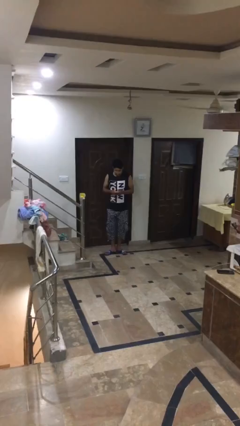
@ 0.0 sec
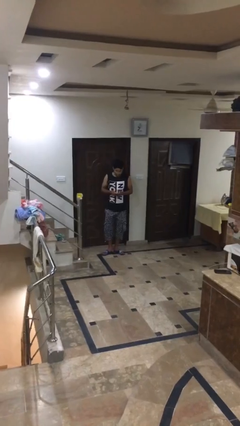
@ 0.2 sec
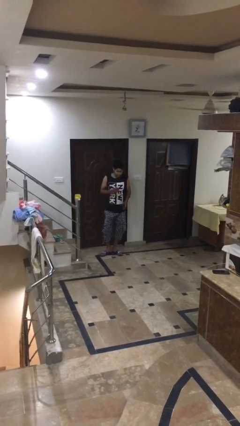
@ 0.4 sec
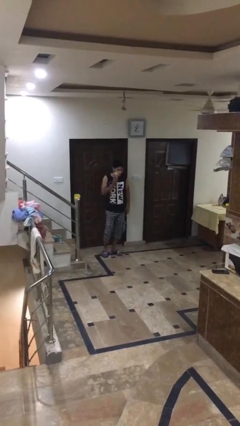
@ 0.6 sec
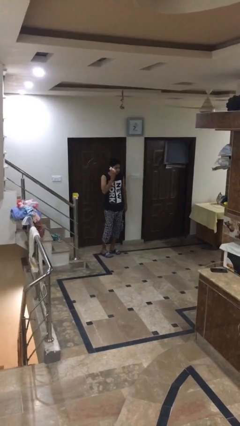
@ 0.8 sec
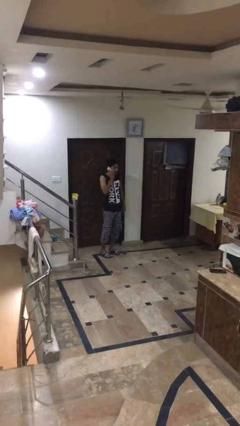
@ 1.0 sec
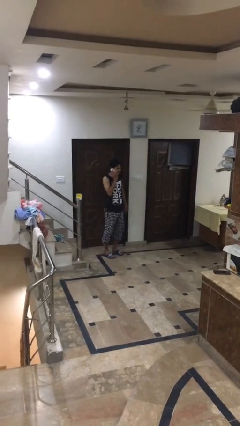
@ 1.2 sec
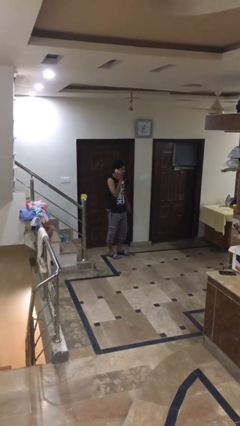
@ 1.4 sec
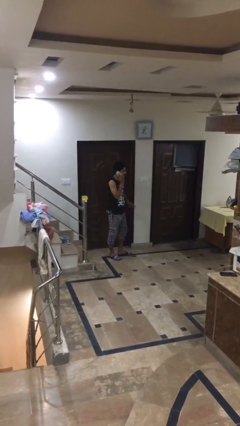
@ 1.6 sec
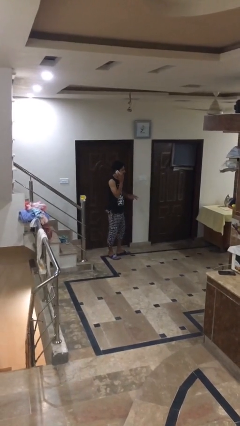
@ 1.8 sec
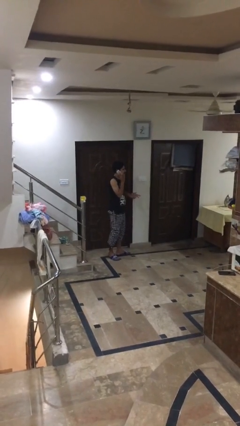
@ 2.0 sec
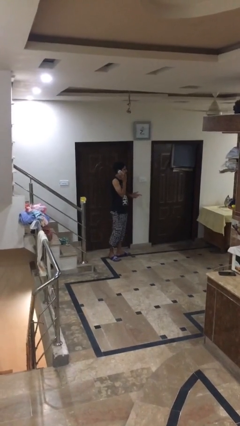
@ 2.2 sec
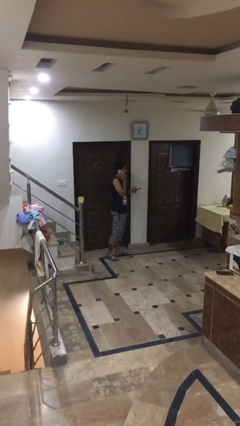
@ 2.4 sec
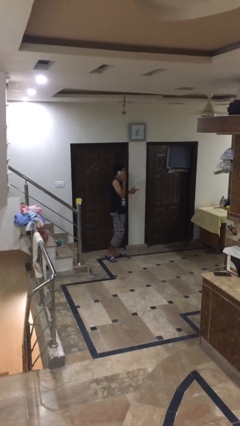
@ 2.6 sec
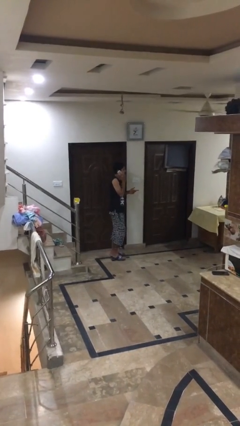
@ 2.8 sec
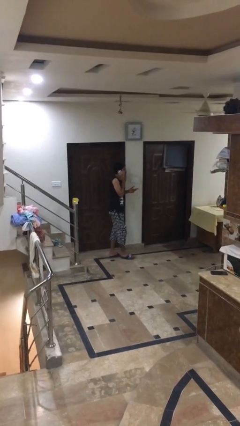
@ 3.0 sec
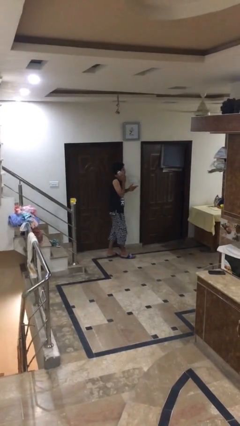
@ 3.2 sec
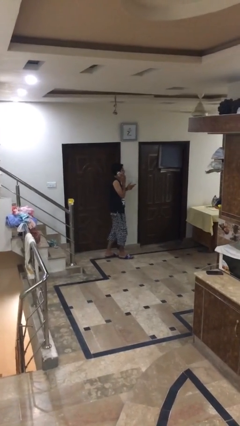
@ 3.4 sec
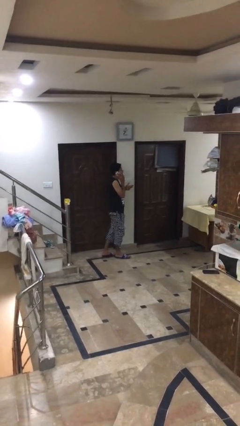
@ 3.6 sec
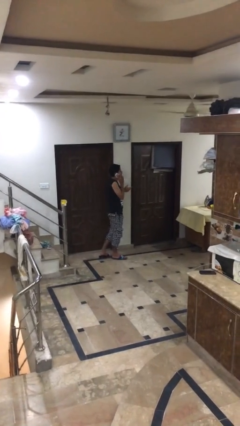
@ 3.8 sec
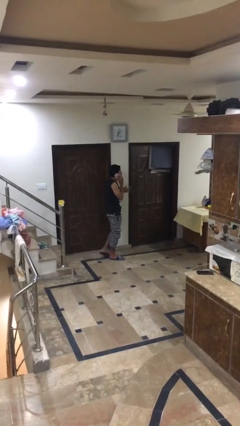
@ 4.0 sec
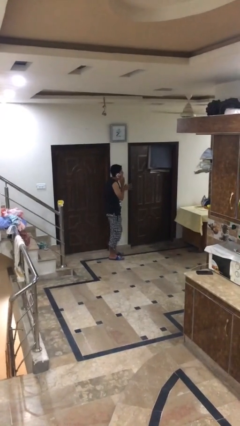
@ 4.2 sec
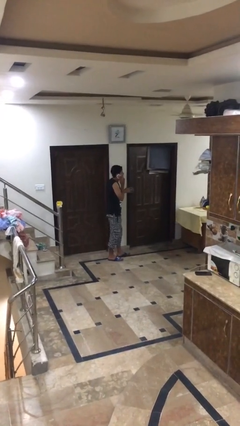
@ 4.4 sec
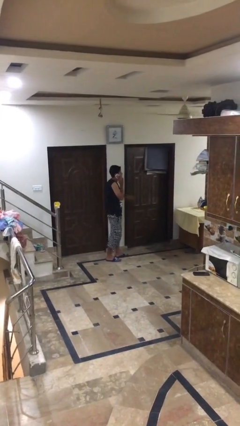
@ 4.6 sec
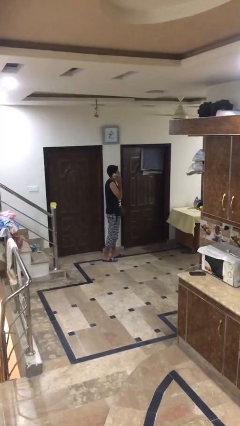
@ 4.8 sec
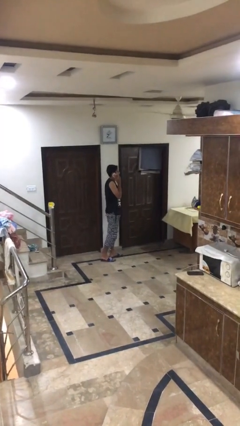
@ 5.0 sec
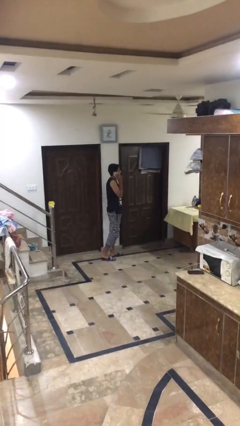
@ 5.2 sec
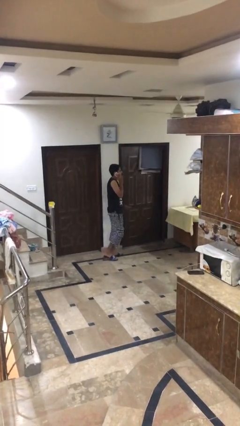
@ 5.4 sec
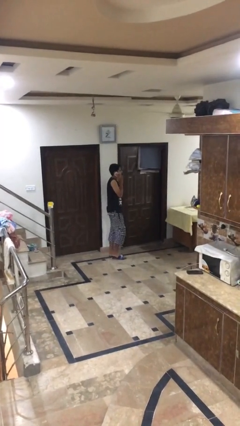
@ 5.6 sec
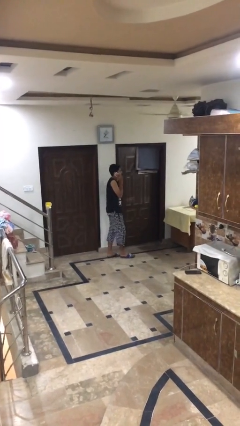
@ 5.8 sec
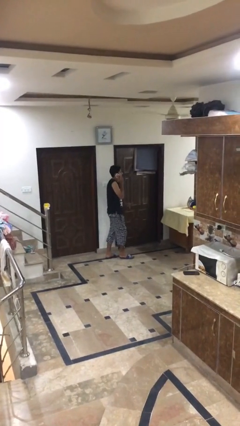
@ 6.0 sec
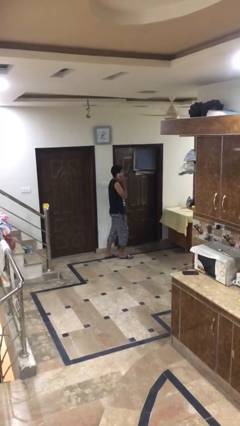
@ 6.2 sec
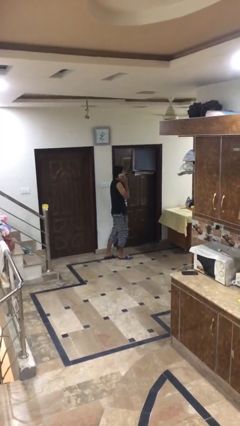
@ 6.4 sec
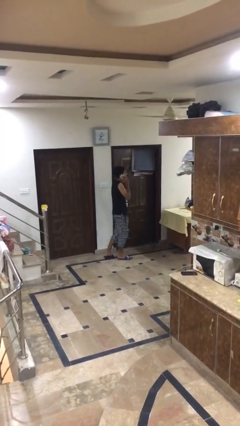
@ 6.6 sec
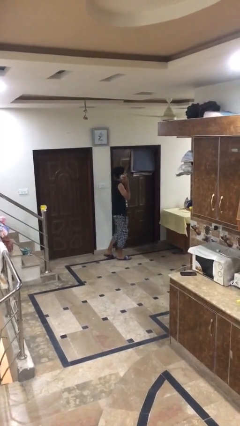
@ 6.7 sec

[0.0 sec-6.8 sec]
person talks on phone

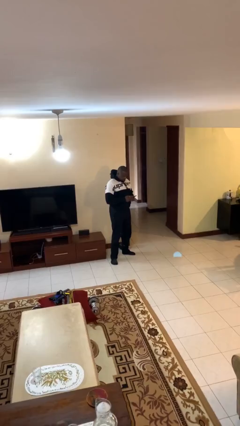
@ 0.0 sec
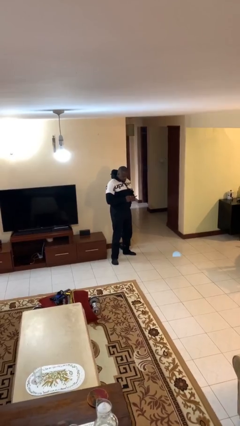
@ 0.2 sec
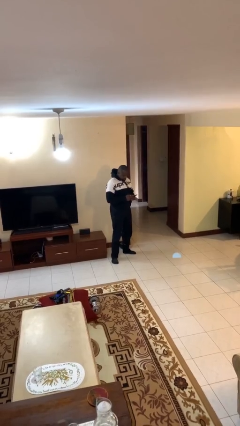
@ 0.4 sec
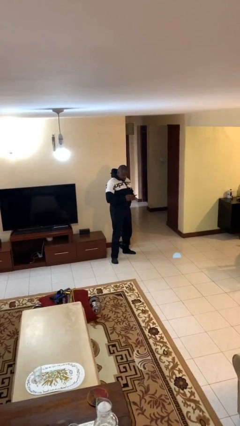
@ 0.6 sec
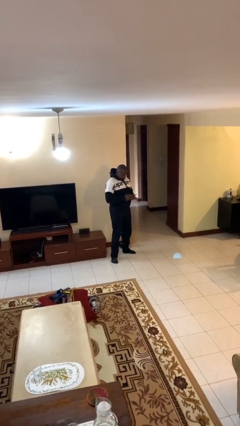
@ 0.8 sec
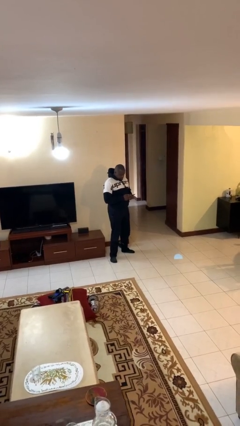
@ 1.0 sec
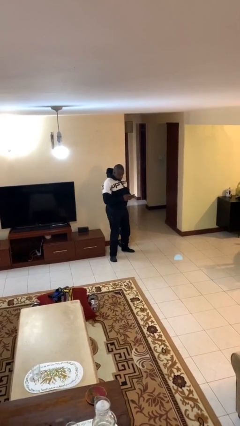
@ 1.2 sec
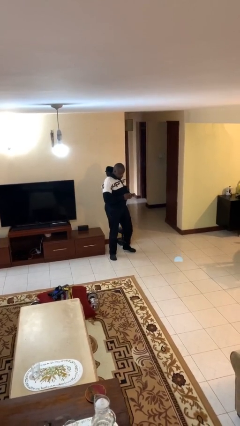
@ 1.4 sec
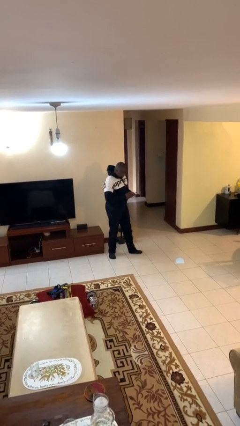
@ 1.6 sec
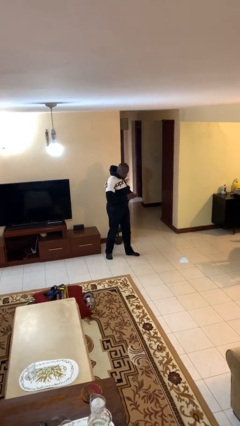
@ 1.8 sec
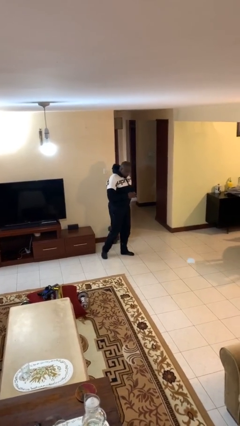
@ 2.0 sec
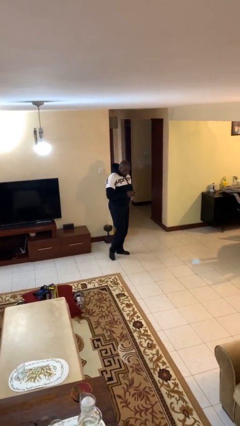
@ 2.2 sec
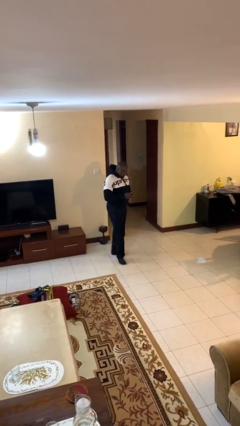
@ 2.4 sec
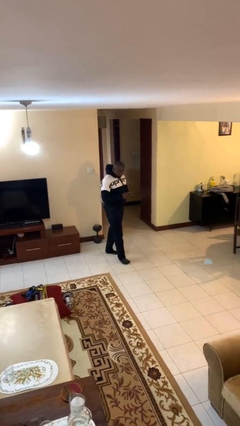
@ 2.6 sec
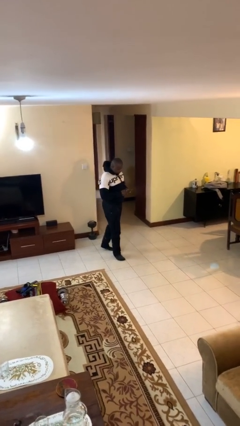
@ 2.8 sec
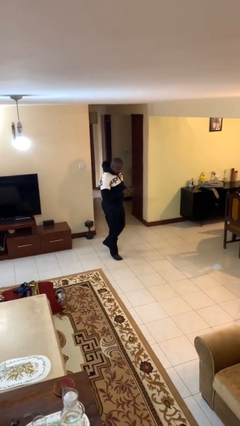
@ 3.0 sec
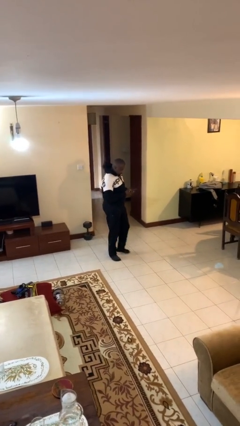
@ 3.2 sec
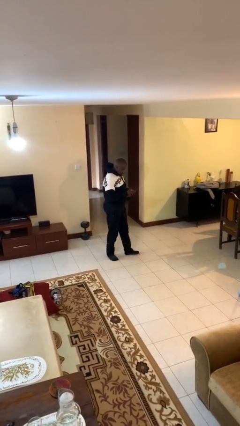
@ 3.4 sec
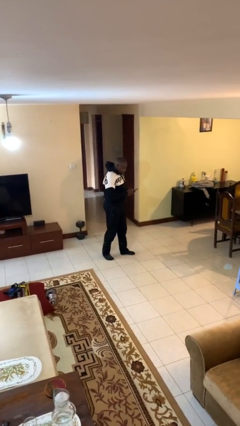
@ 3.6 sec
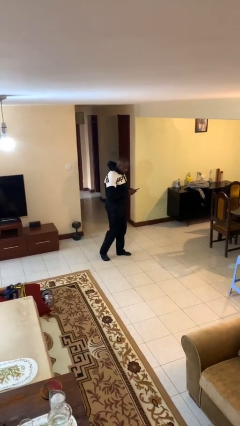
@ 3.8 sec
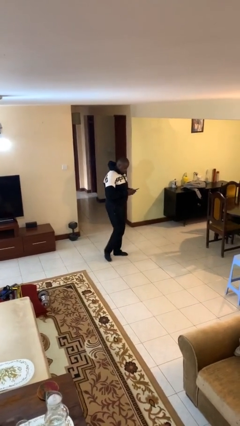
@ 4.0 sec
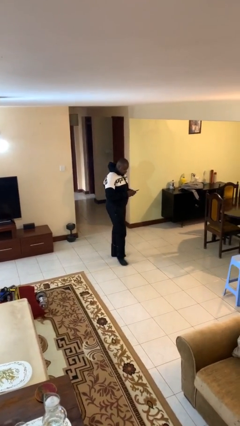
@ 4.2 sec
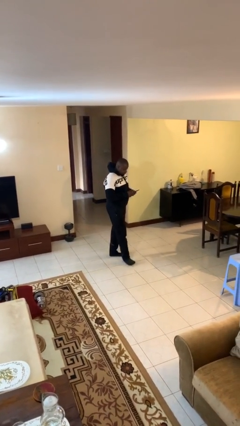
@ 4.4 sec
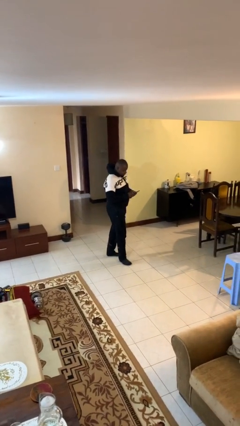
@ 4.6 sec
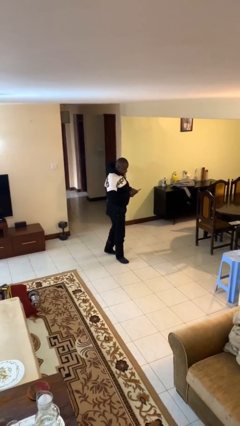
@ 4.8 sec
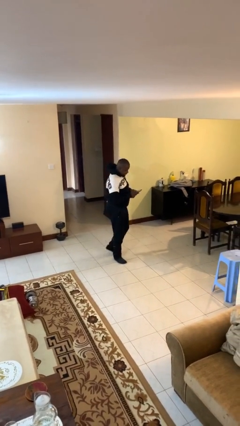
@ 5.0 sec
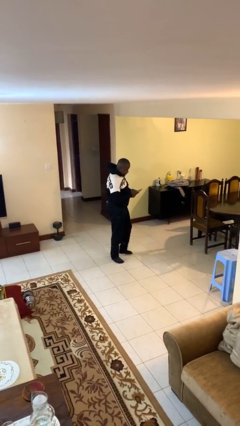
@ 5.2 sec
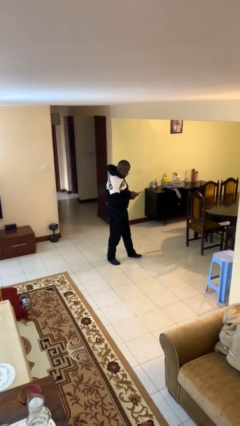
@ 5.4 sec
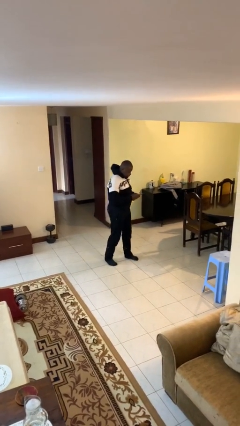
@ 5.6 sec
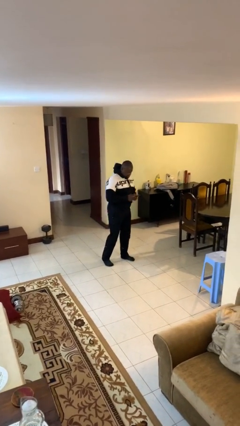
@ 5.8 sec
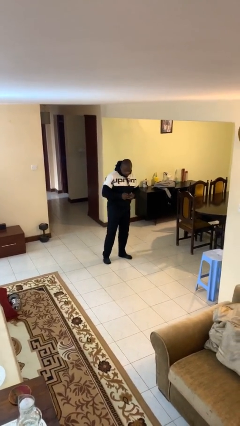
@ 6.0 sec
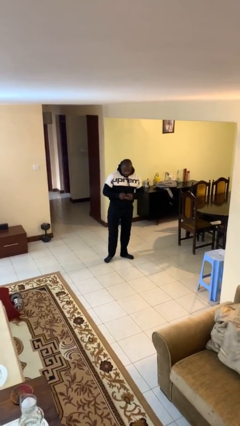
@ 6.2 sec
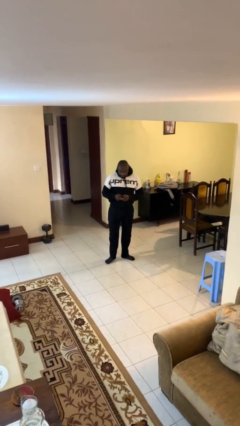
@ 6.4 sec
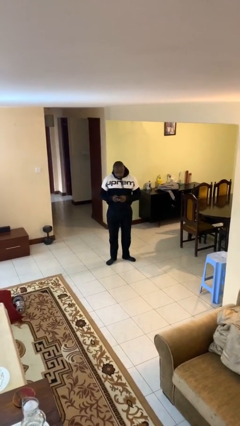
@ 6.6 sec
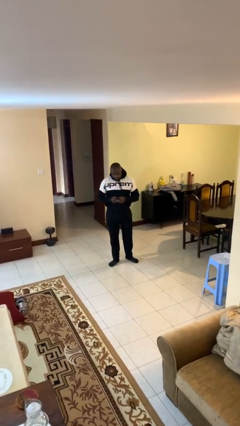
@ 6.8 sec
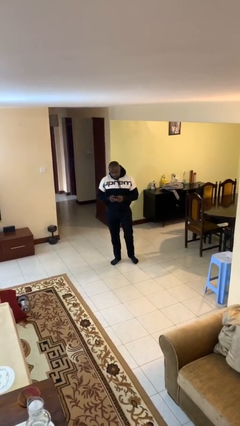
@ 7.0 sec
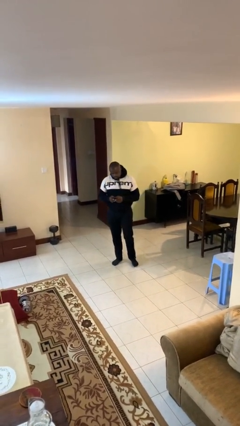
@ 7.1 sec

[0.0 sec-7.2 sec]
person texts on phone

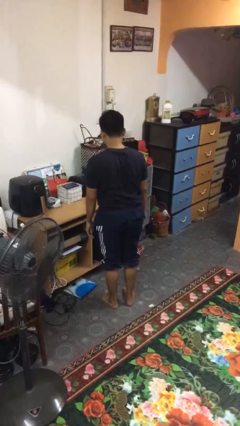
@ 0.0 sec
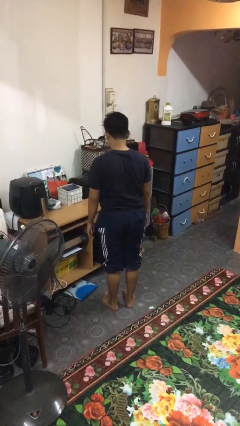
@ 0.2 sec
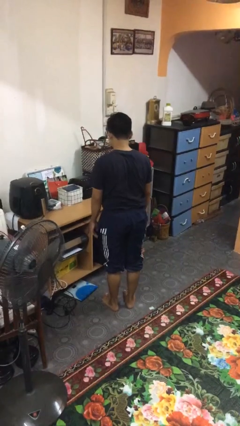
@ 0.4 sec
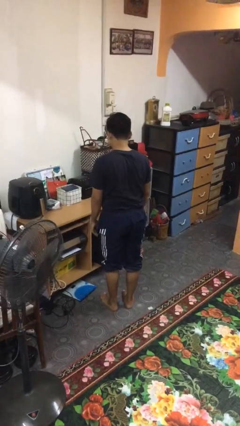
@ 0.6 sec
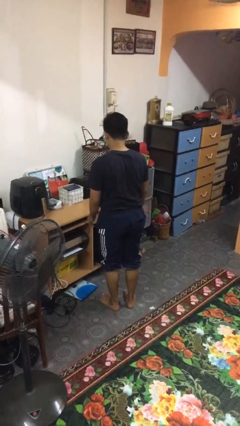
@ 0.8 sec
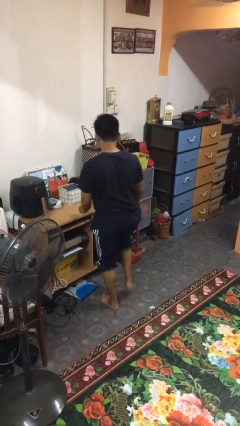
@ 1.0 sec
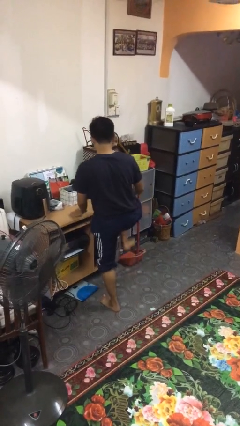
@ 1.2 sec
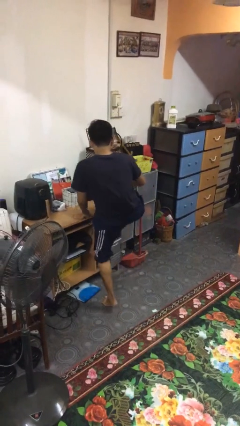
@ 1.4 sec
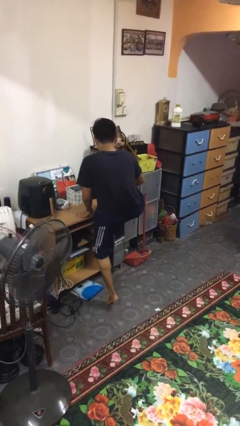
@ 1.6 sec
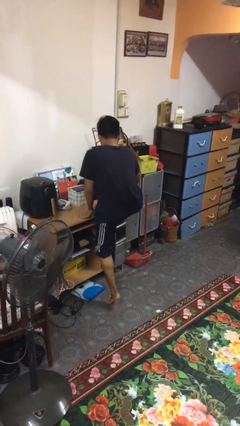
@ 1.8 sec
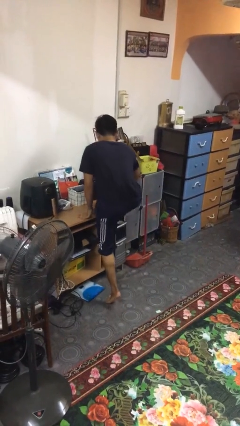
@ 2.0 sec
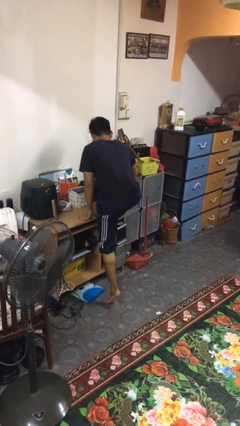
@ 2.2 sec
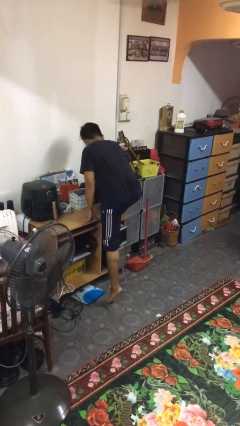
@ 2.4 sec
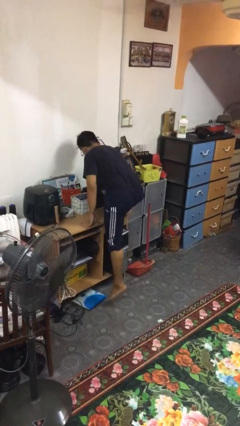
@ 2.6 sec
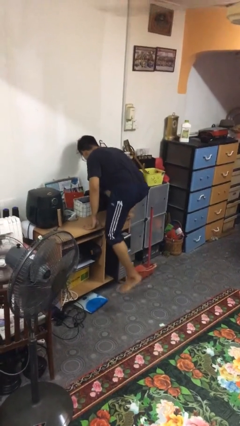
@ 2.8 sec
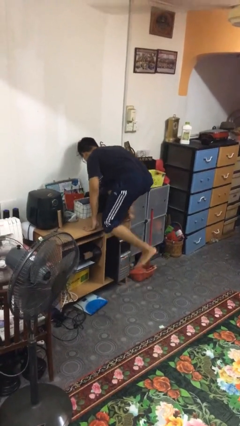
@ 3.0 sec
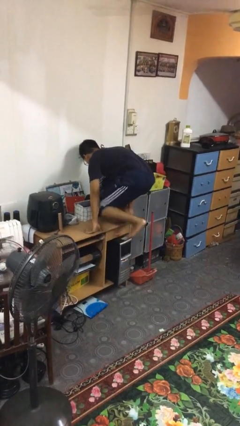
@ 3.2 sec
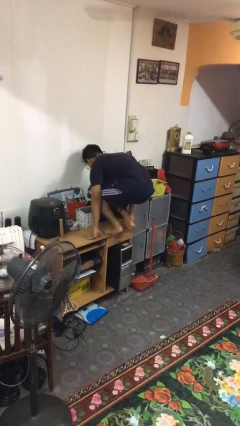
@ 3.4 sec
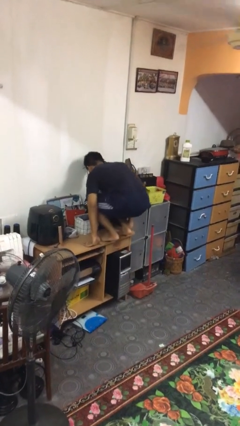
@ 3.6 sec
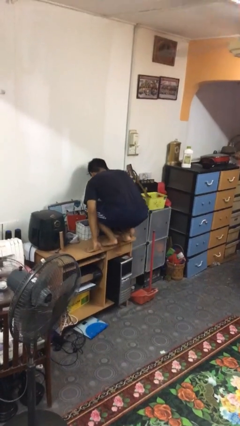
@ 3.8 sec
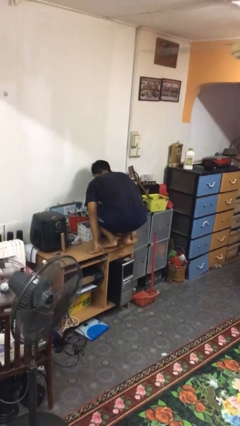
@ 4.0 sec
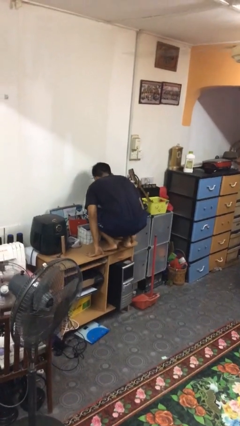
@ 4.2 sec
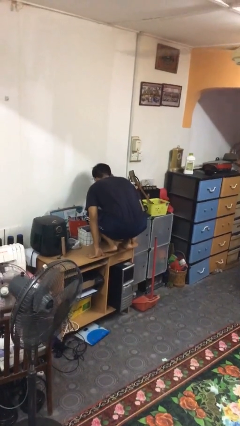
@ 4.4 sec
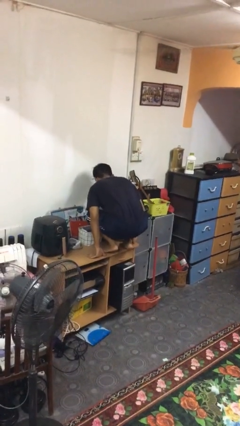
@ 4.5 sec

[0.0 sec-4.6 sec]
person climbs on table
